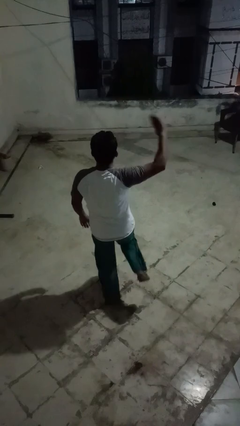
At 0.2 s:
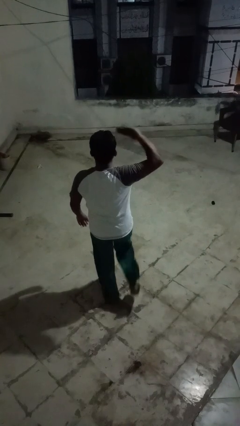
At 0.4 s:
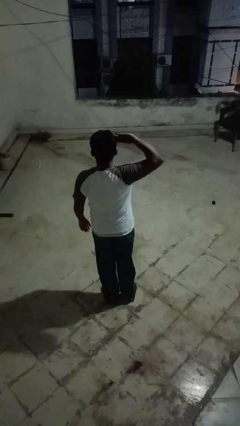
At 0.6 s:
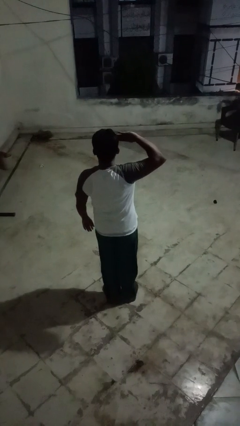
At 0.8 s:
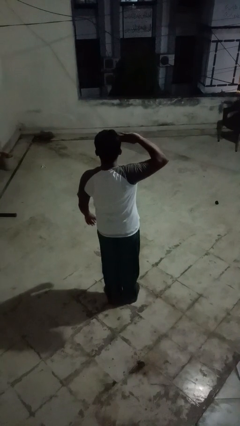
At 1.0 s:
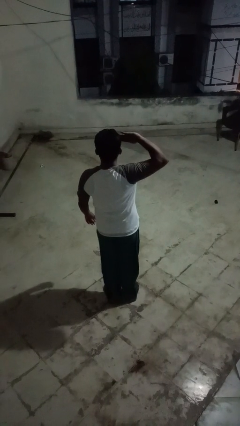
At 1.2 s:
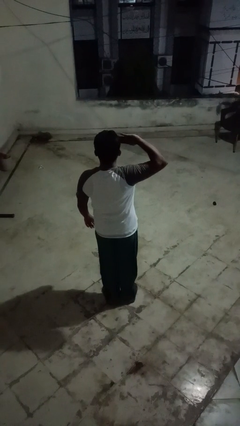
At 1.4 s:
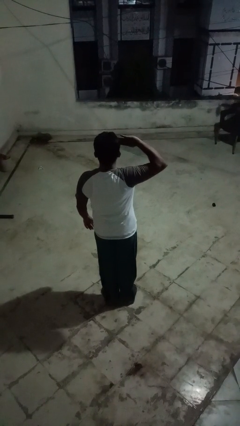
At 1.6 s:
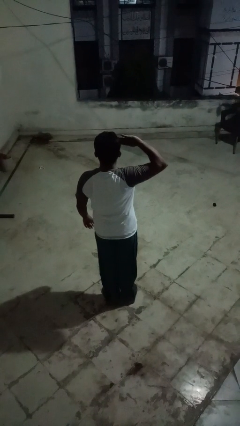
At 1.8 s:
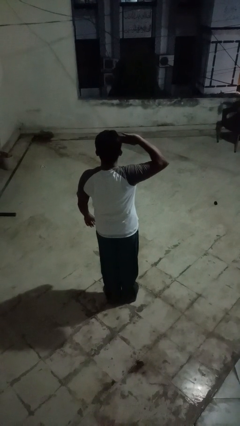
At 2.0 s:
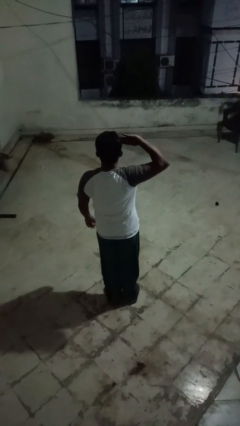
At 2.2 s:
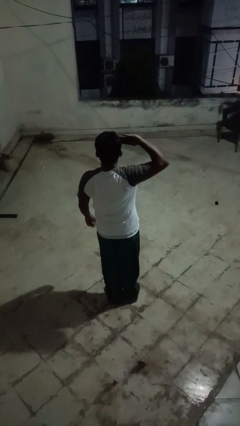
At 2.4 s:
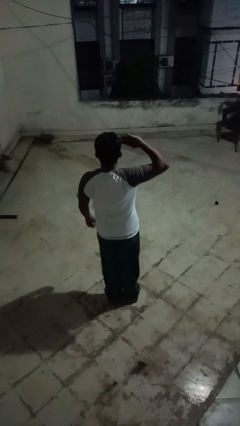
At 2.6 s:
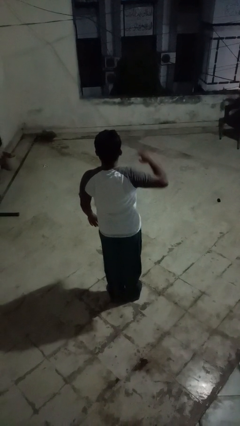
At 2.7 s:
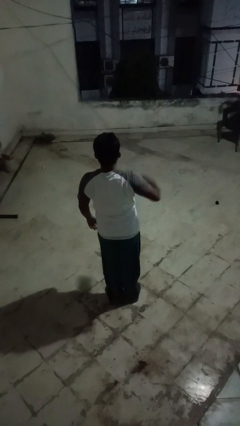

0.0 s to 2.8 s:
person salutes

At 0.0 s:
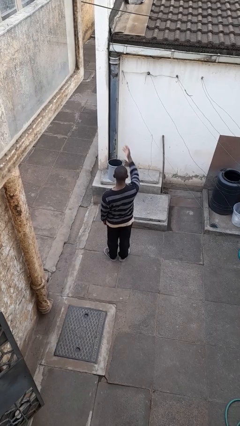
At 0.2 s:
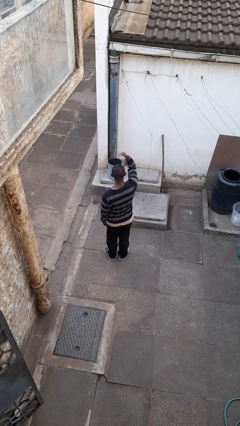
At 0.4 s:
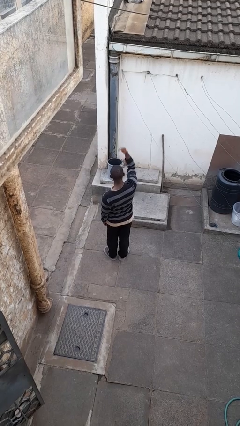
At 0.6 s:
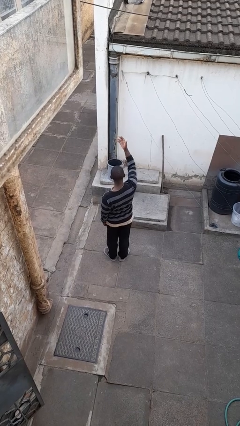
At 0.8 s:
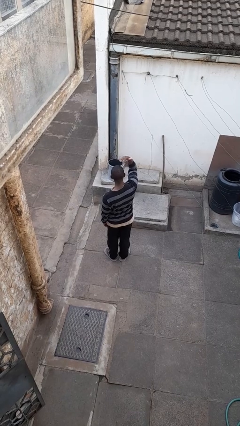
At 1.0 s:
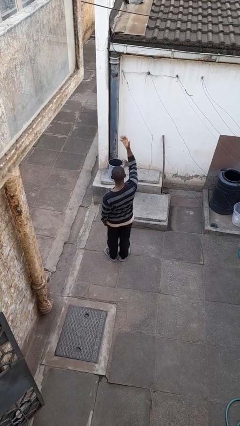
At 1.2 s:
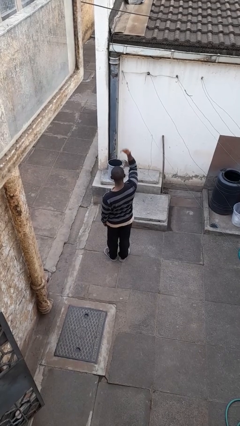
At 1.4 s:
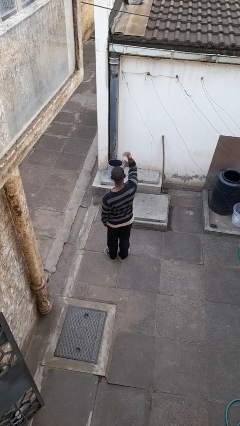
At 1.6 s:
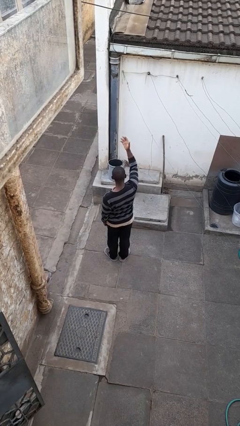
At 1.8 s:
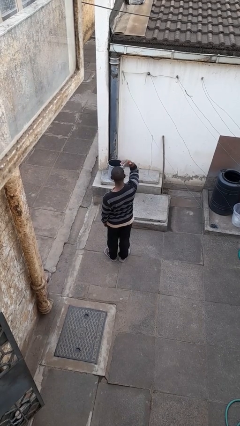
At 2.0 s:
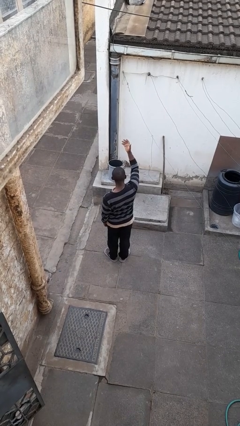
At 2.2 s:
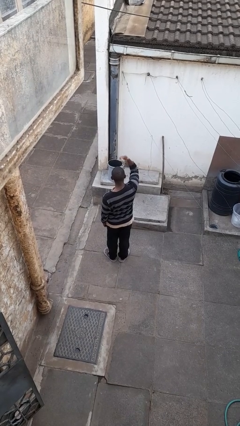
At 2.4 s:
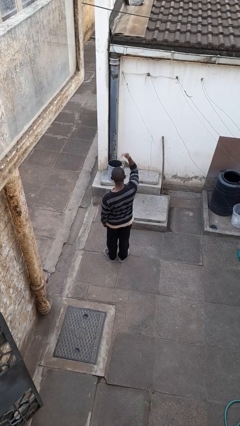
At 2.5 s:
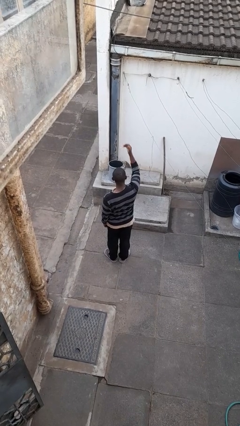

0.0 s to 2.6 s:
person gestures come here

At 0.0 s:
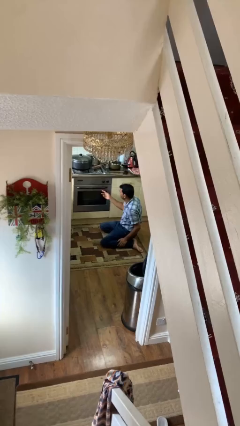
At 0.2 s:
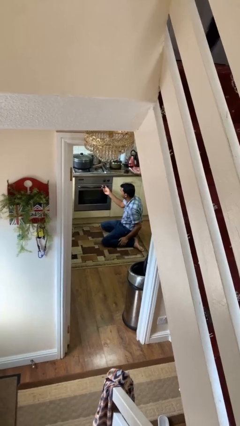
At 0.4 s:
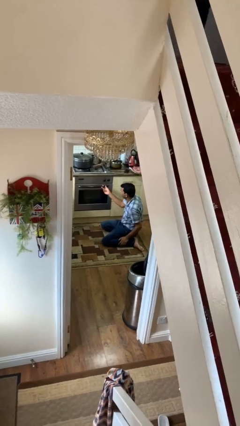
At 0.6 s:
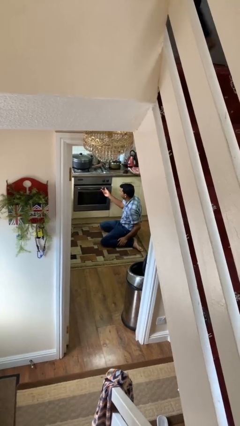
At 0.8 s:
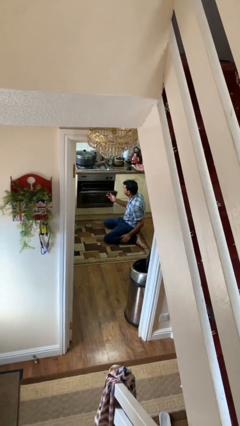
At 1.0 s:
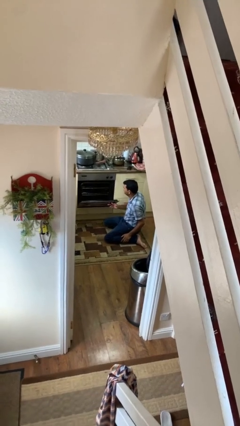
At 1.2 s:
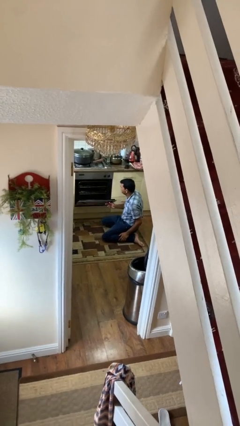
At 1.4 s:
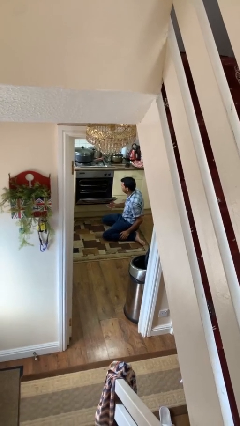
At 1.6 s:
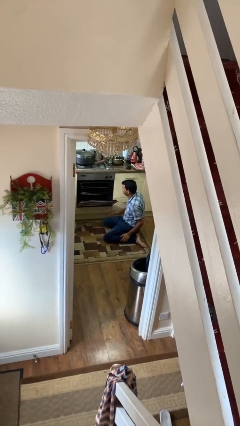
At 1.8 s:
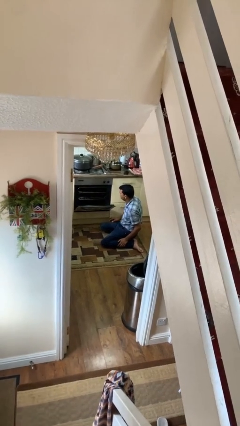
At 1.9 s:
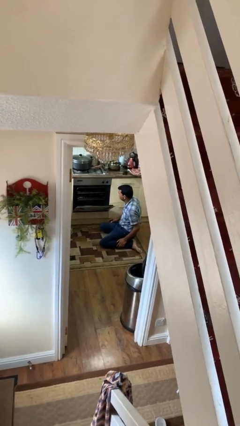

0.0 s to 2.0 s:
person opens oven door

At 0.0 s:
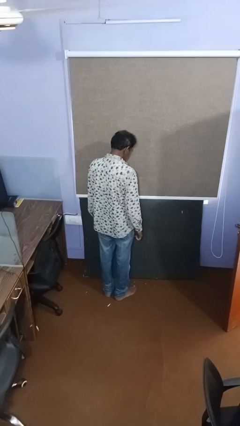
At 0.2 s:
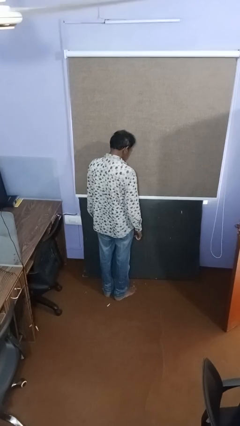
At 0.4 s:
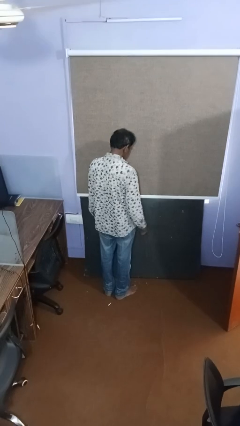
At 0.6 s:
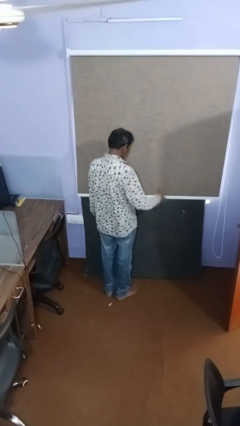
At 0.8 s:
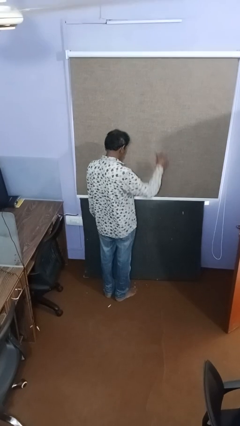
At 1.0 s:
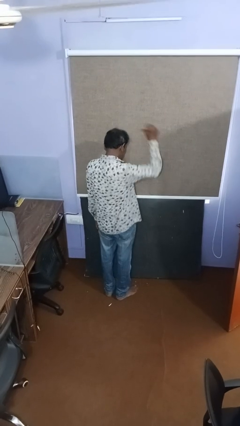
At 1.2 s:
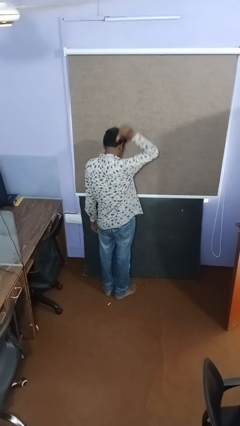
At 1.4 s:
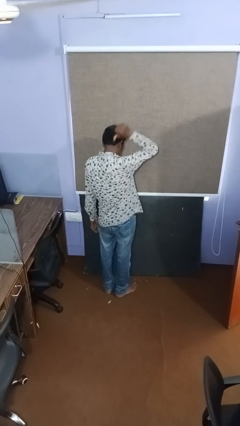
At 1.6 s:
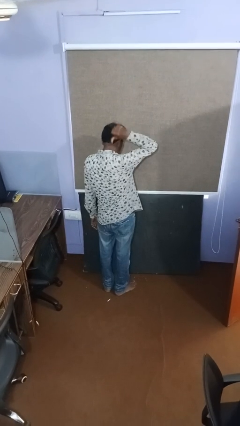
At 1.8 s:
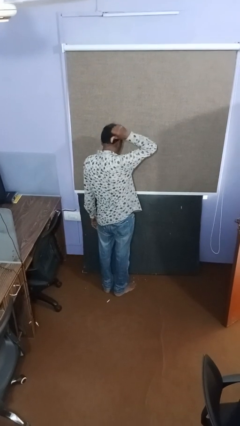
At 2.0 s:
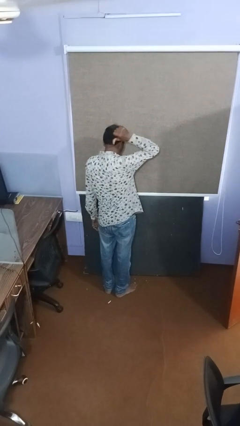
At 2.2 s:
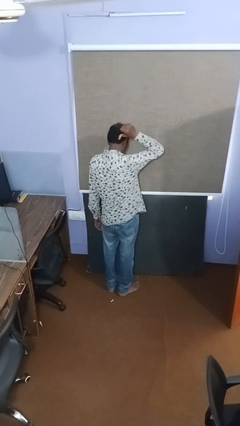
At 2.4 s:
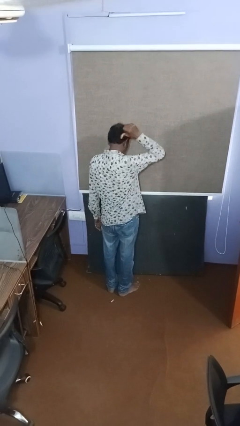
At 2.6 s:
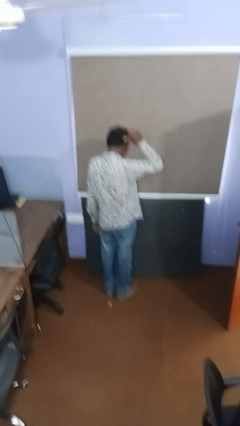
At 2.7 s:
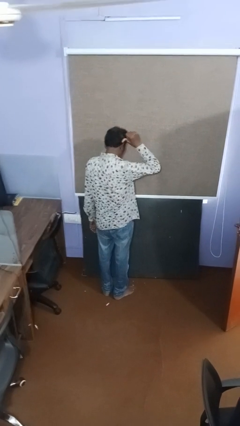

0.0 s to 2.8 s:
person gestures thumbs up

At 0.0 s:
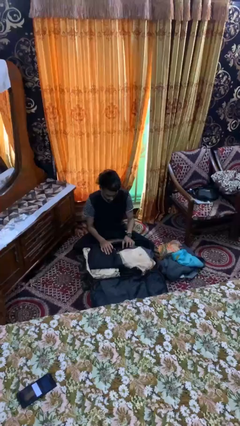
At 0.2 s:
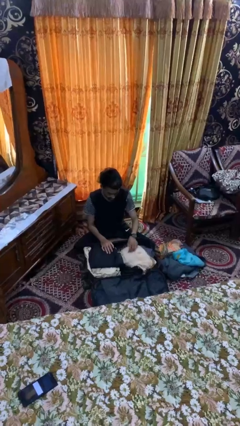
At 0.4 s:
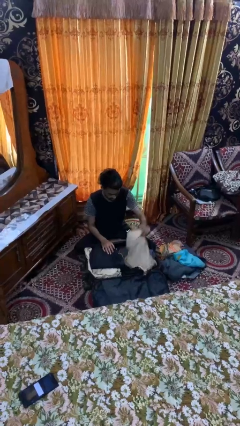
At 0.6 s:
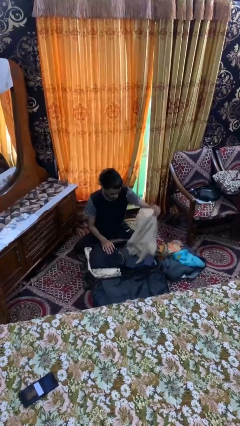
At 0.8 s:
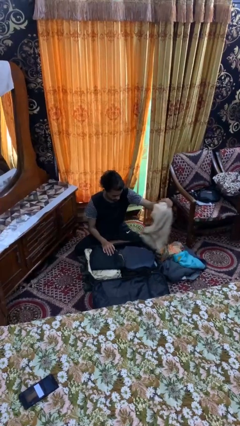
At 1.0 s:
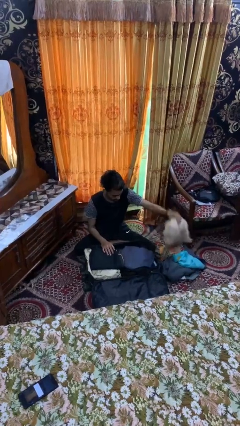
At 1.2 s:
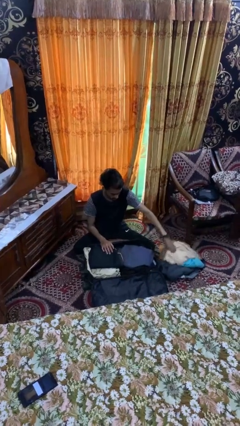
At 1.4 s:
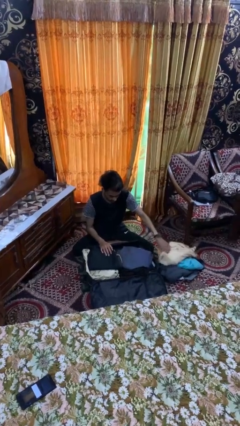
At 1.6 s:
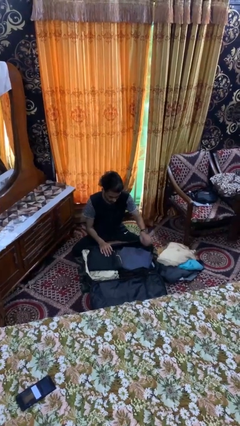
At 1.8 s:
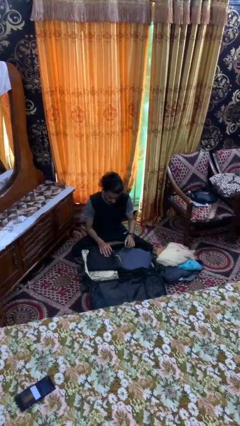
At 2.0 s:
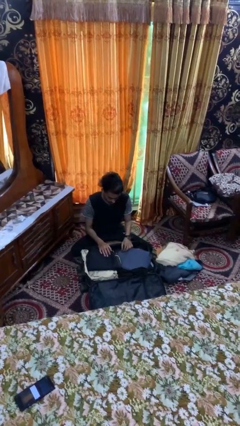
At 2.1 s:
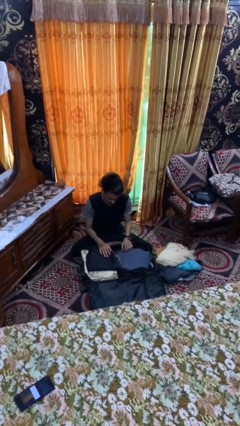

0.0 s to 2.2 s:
person unloads clothes from suitcase

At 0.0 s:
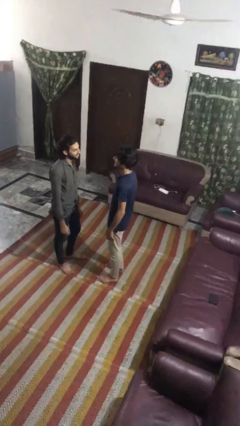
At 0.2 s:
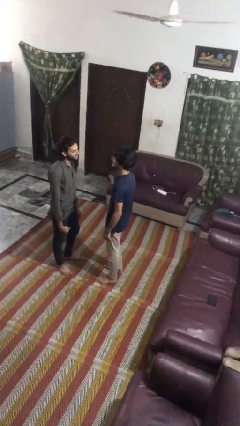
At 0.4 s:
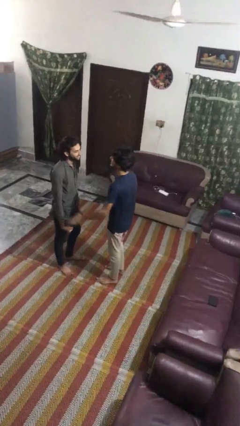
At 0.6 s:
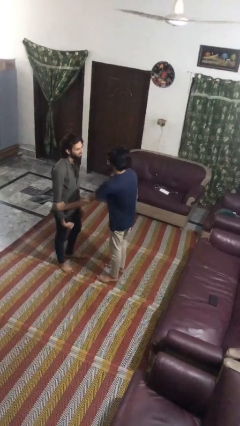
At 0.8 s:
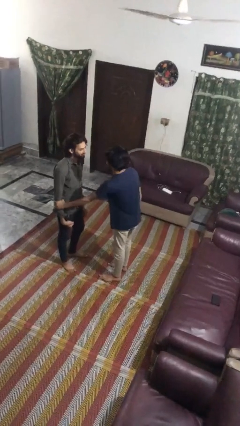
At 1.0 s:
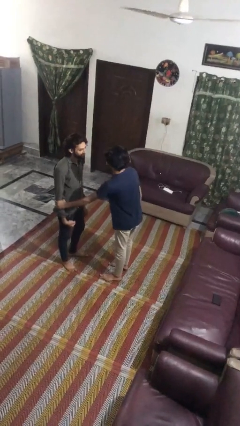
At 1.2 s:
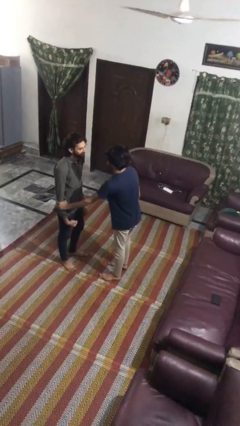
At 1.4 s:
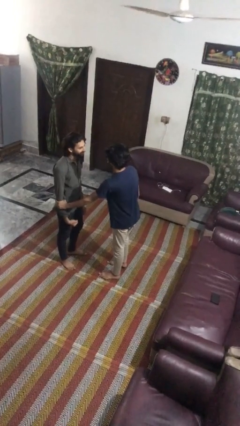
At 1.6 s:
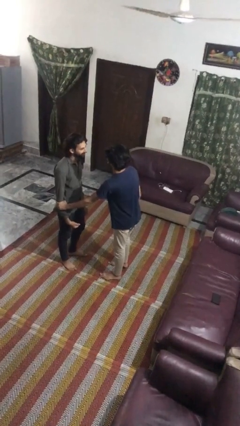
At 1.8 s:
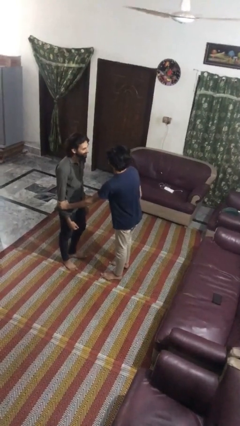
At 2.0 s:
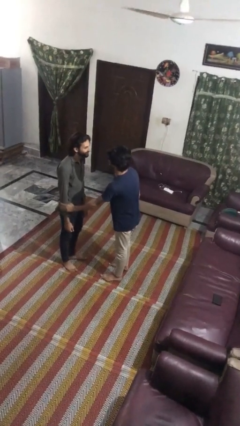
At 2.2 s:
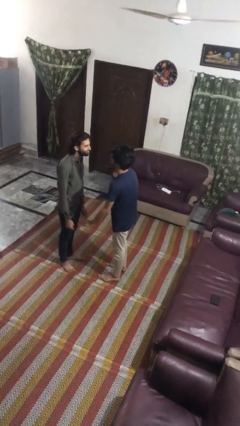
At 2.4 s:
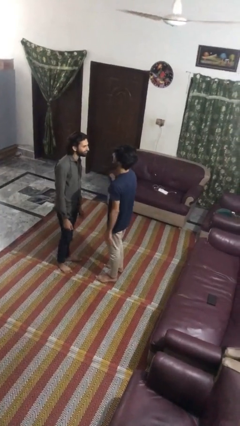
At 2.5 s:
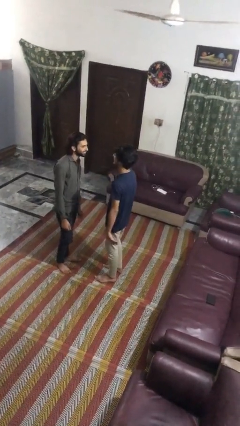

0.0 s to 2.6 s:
person grabs person by forearm

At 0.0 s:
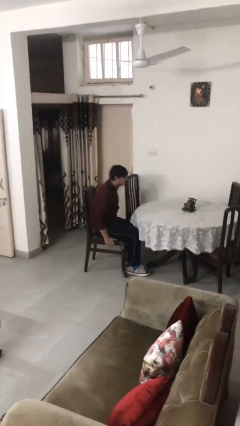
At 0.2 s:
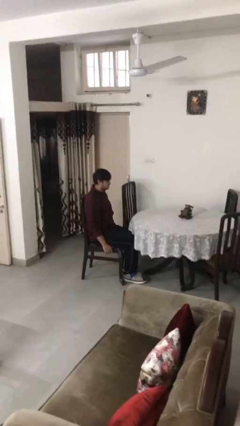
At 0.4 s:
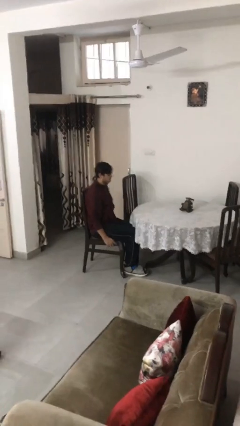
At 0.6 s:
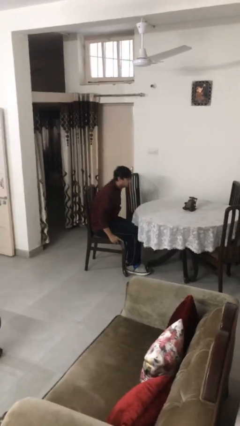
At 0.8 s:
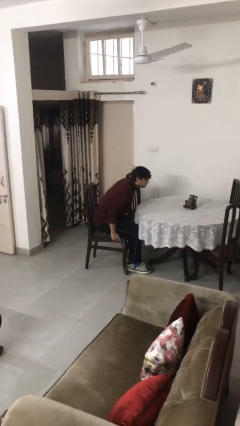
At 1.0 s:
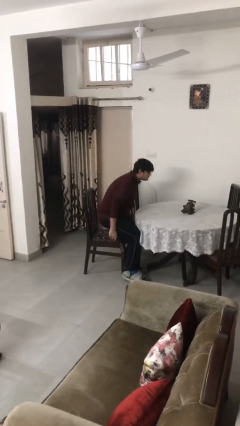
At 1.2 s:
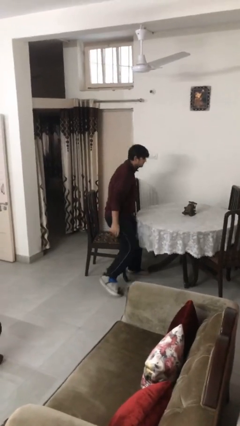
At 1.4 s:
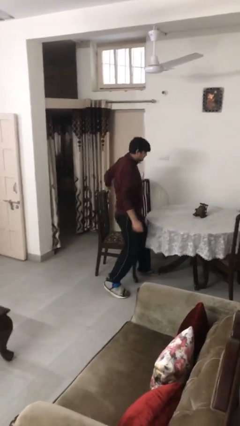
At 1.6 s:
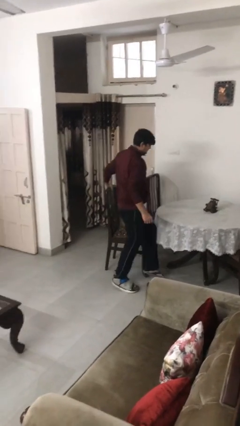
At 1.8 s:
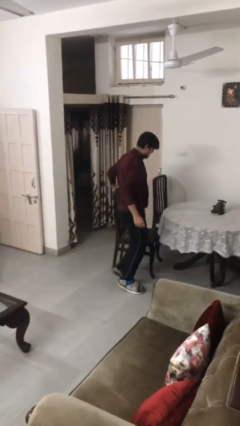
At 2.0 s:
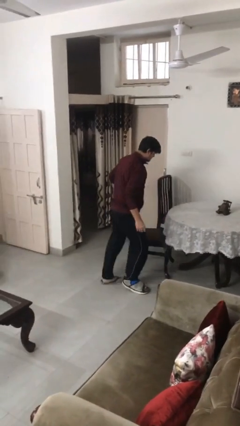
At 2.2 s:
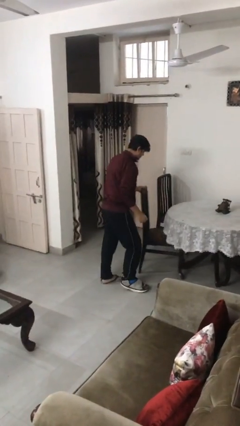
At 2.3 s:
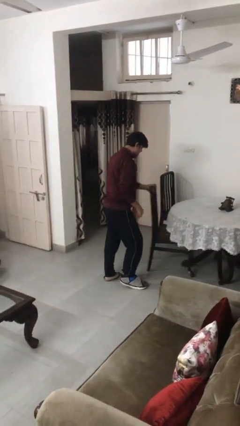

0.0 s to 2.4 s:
person stands up
